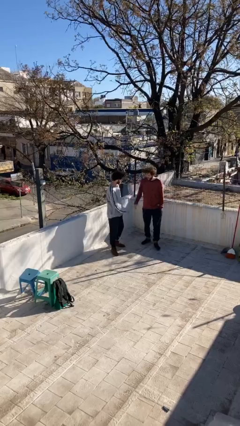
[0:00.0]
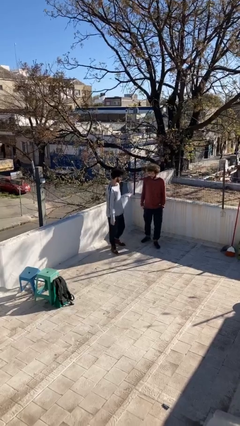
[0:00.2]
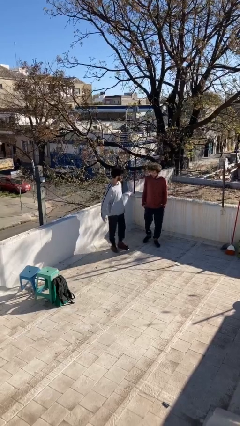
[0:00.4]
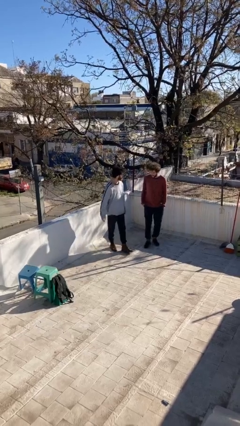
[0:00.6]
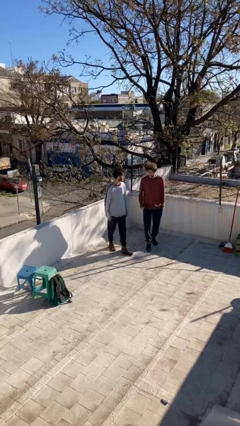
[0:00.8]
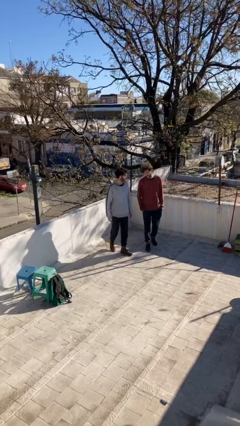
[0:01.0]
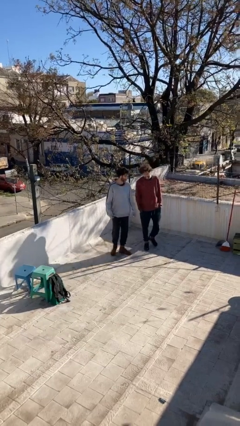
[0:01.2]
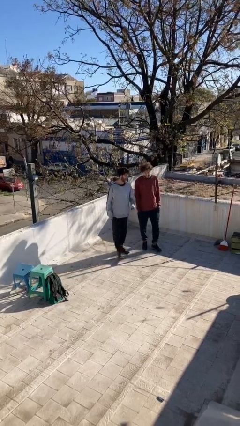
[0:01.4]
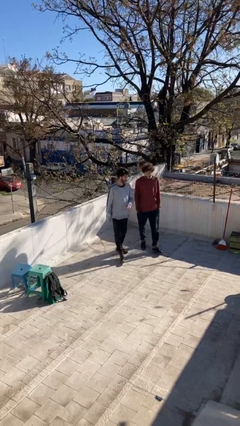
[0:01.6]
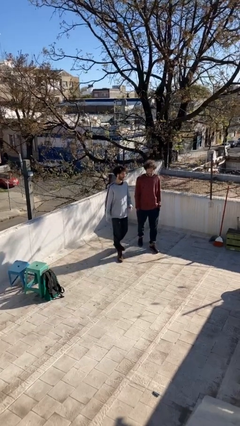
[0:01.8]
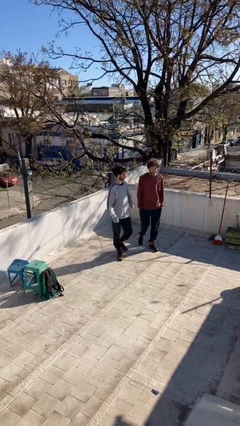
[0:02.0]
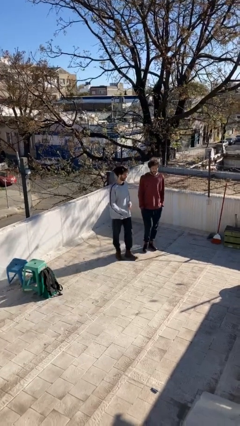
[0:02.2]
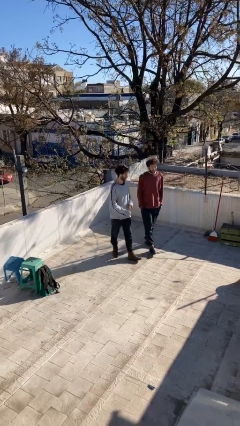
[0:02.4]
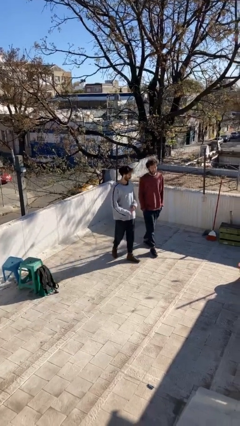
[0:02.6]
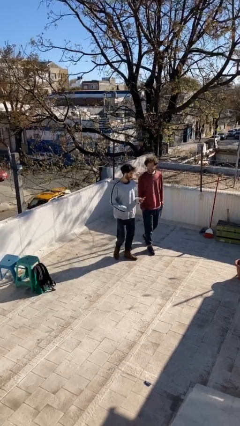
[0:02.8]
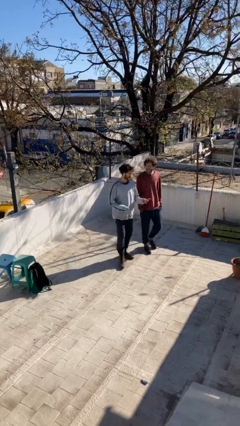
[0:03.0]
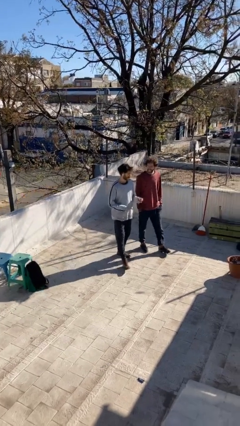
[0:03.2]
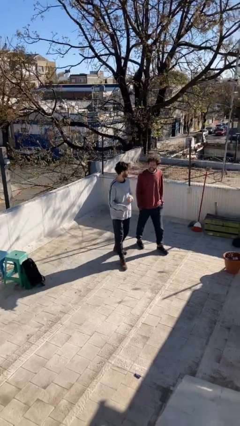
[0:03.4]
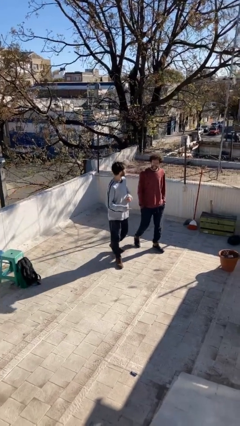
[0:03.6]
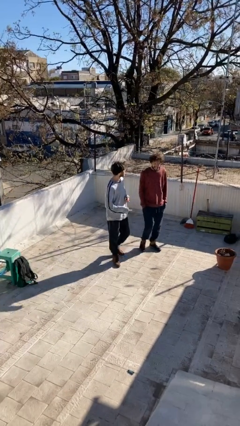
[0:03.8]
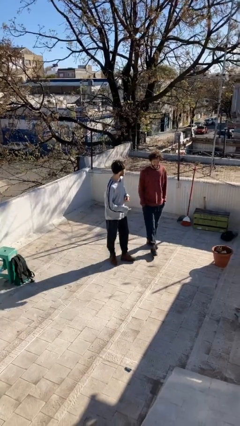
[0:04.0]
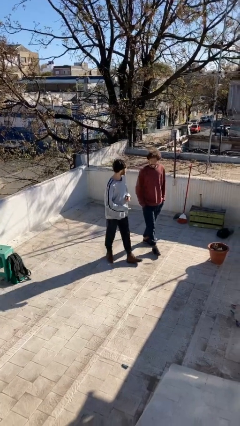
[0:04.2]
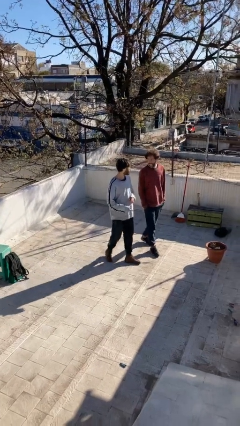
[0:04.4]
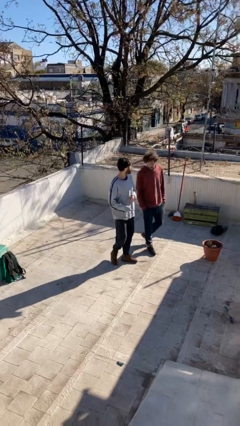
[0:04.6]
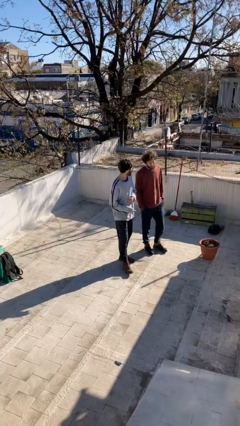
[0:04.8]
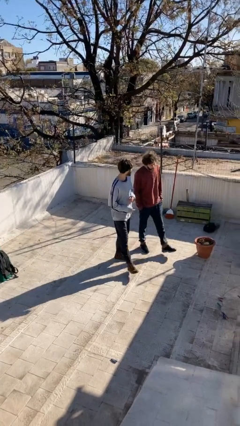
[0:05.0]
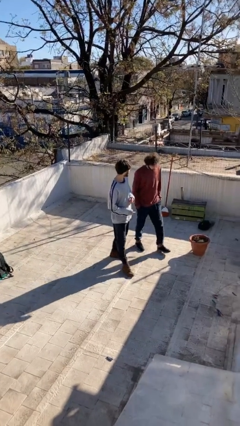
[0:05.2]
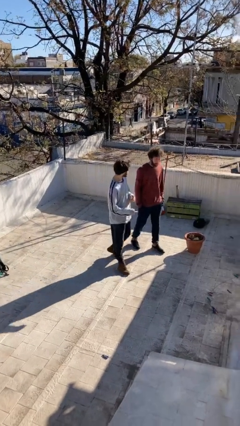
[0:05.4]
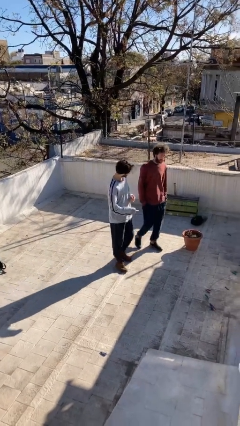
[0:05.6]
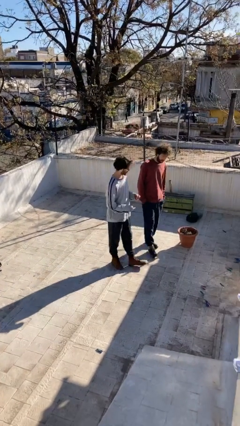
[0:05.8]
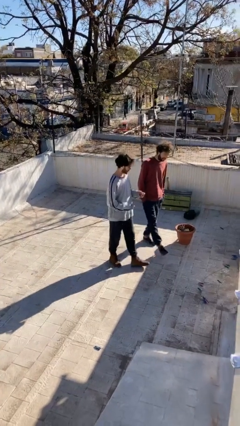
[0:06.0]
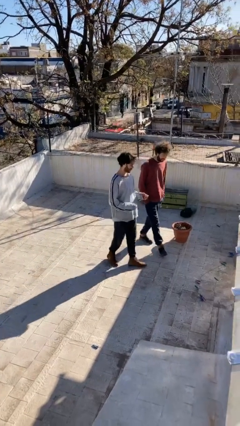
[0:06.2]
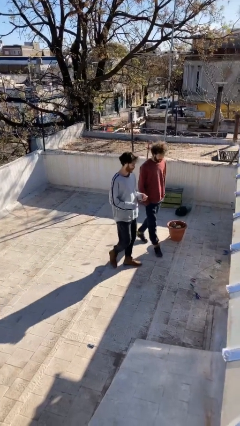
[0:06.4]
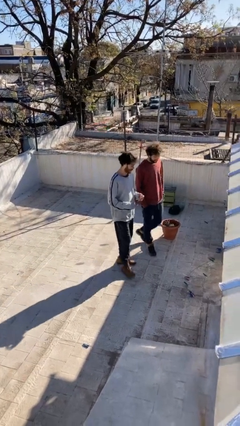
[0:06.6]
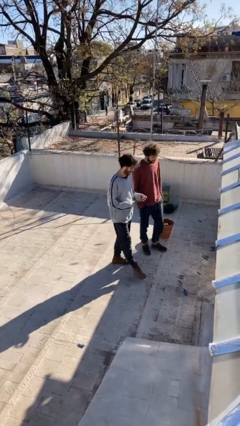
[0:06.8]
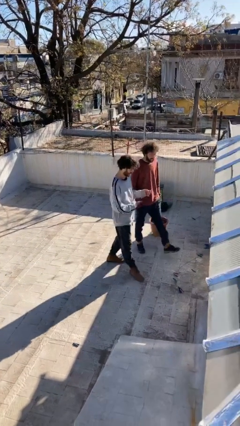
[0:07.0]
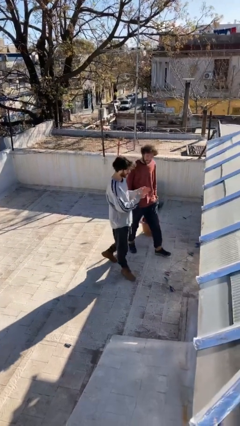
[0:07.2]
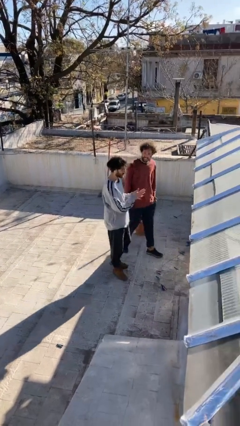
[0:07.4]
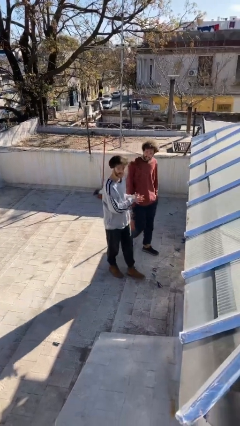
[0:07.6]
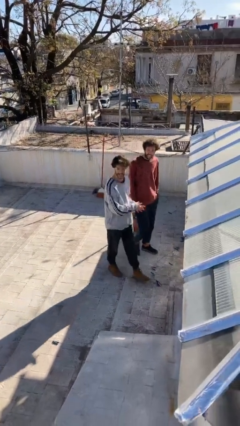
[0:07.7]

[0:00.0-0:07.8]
person talks to person

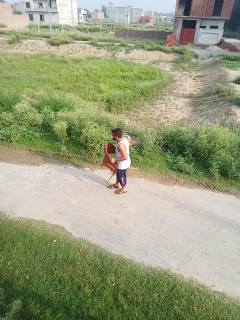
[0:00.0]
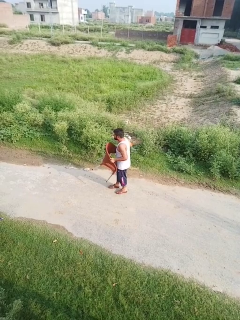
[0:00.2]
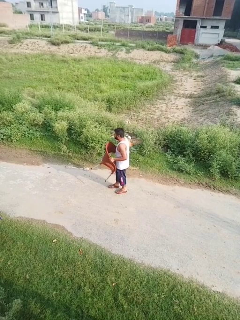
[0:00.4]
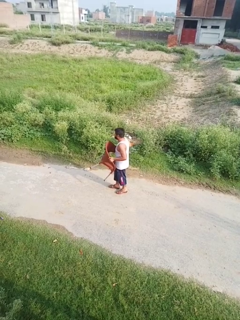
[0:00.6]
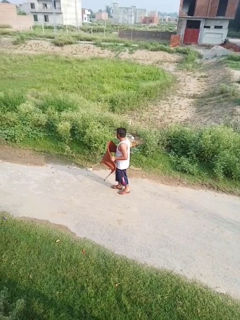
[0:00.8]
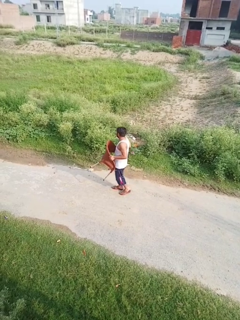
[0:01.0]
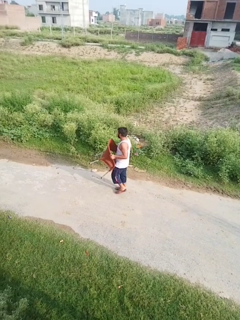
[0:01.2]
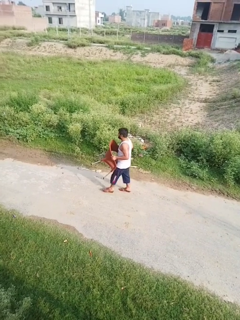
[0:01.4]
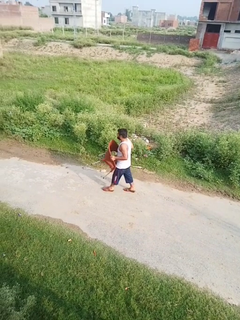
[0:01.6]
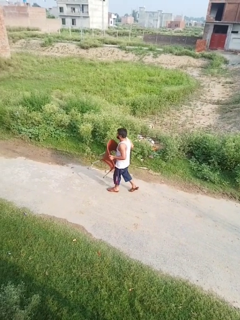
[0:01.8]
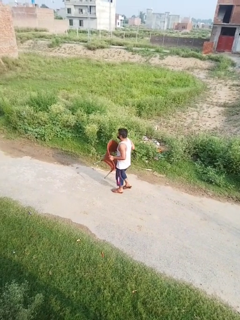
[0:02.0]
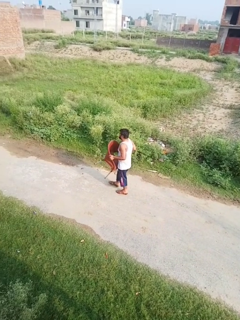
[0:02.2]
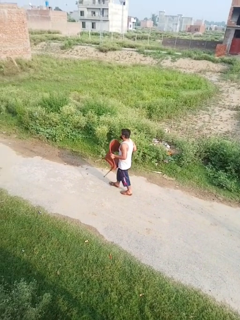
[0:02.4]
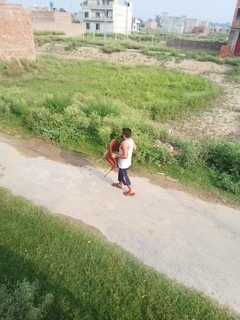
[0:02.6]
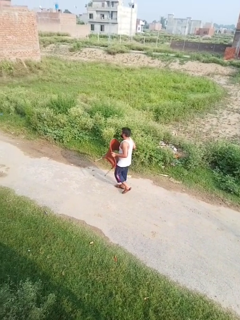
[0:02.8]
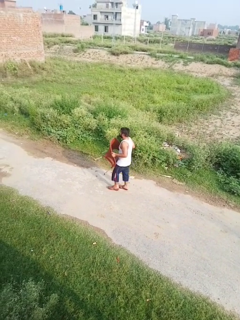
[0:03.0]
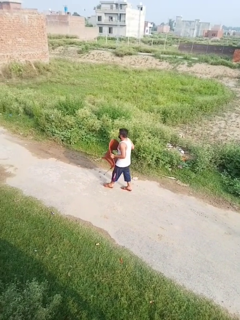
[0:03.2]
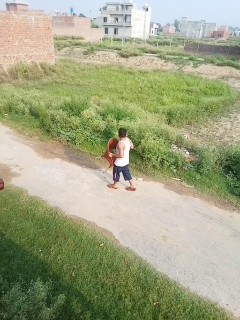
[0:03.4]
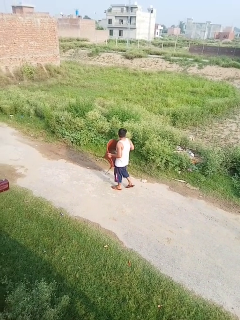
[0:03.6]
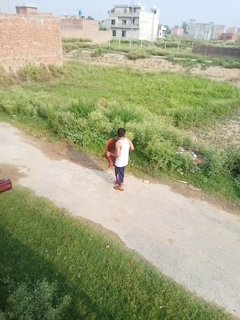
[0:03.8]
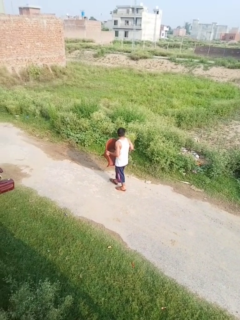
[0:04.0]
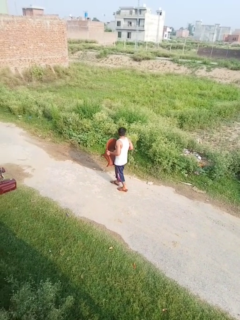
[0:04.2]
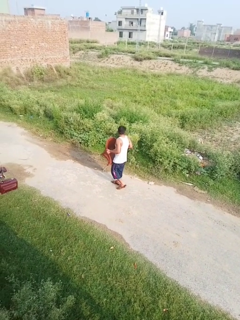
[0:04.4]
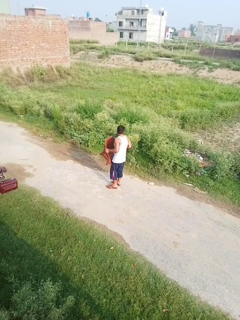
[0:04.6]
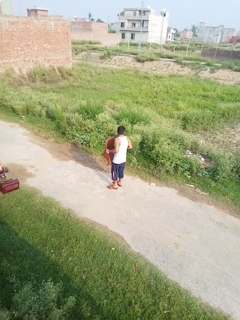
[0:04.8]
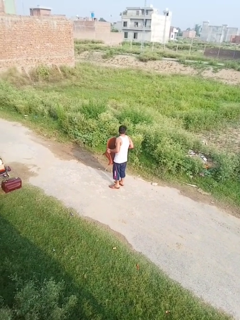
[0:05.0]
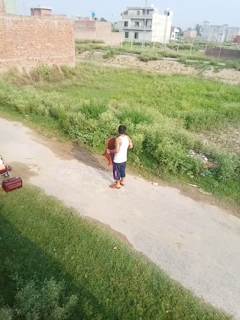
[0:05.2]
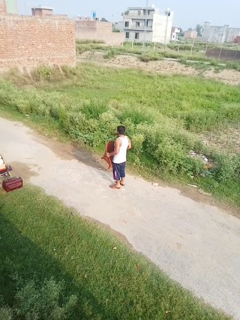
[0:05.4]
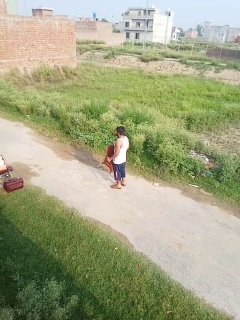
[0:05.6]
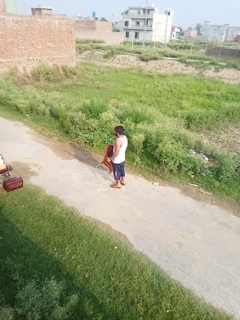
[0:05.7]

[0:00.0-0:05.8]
person carries furniture

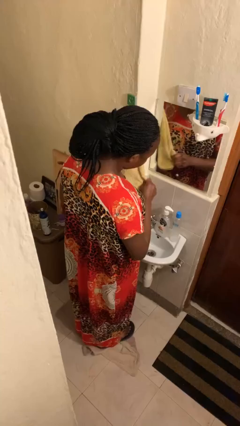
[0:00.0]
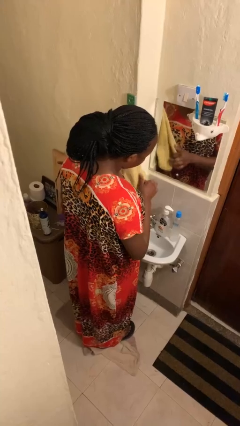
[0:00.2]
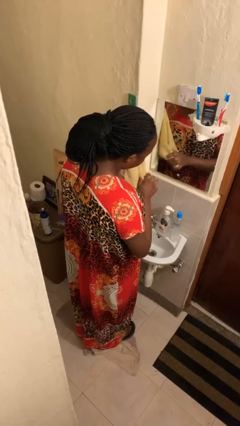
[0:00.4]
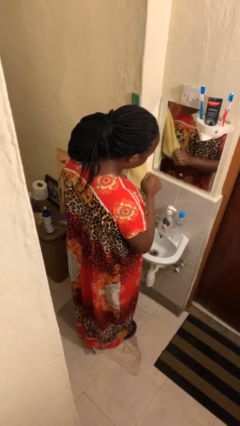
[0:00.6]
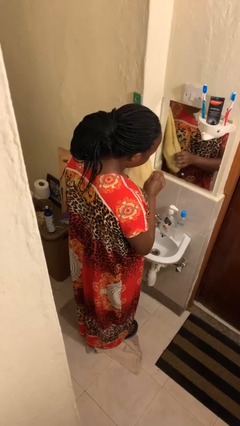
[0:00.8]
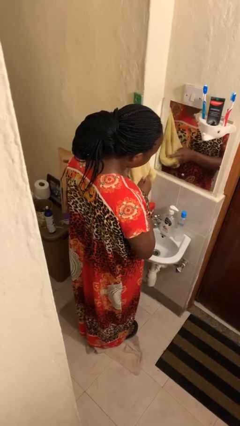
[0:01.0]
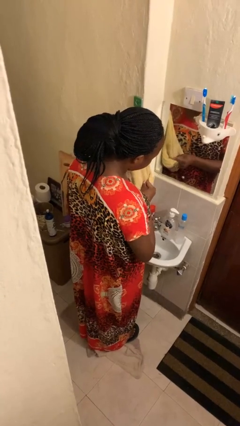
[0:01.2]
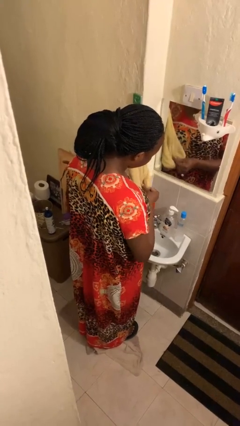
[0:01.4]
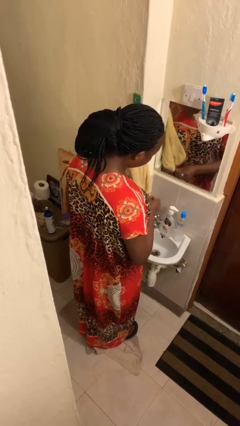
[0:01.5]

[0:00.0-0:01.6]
person dries hands with towel

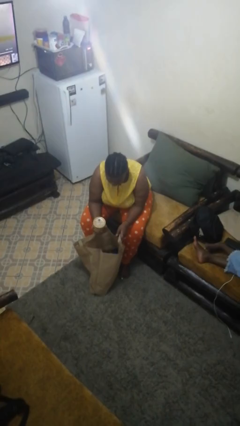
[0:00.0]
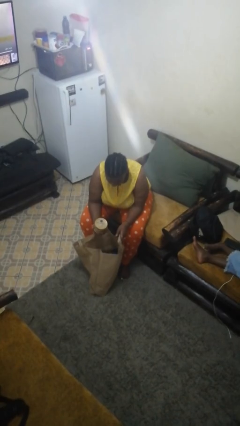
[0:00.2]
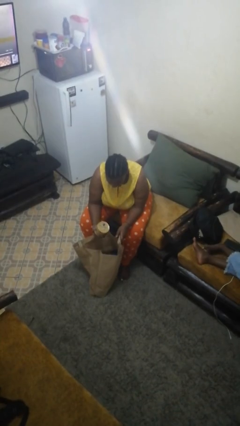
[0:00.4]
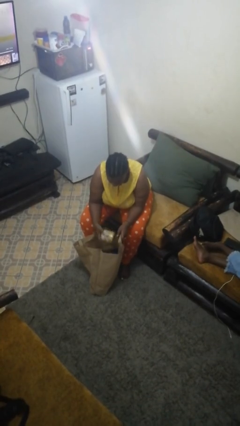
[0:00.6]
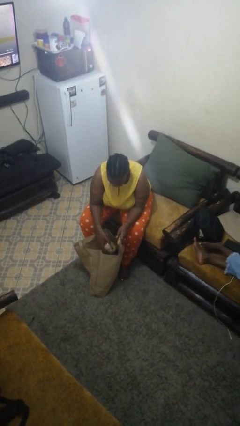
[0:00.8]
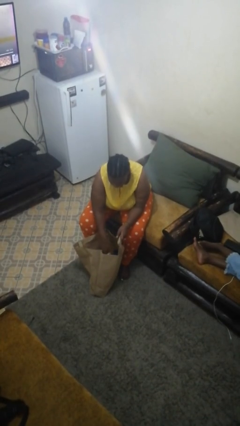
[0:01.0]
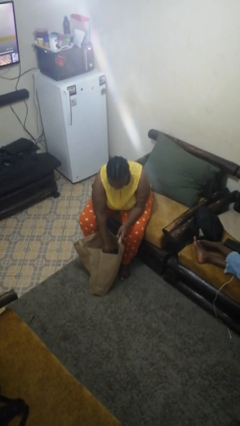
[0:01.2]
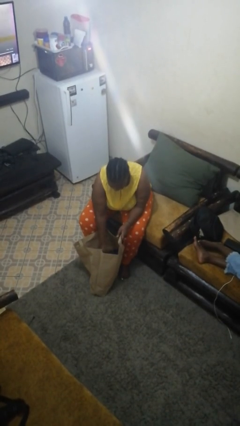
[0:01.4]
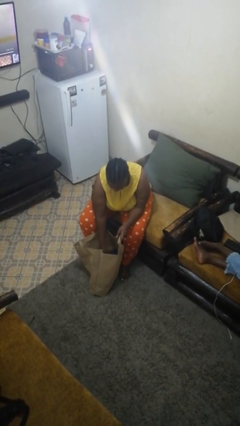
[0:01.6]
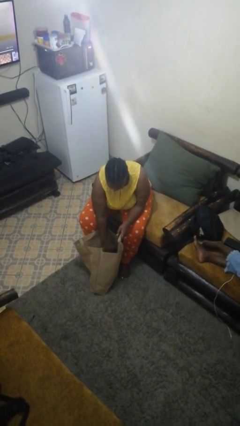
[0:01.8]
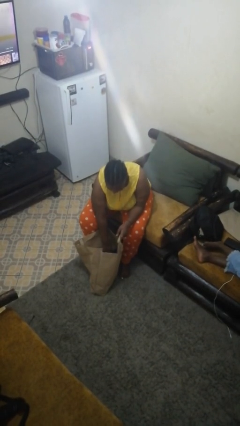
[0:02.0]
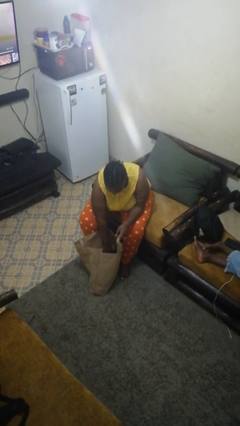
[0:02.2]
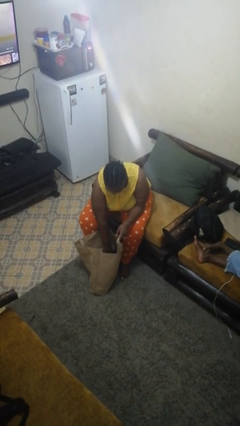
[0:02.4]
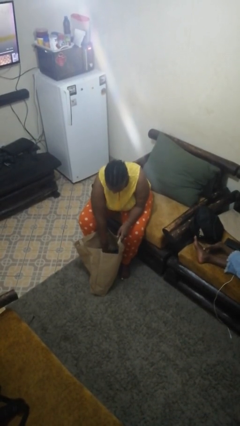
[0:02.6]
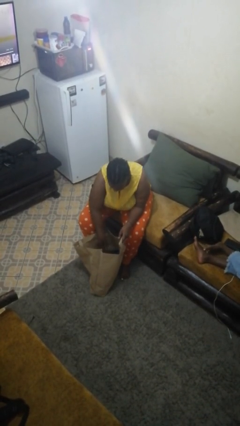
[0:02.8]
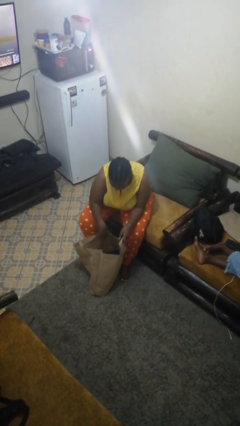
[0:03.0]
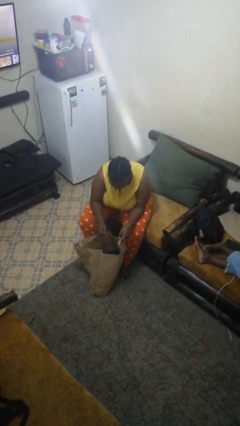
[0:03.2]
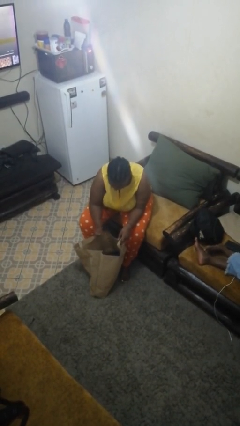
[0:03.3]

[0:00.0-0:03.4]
person puts object into bag
